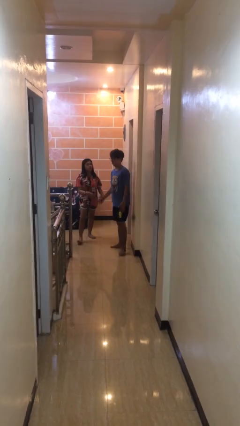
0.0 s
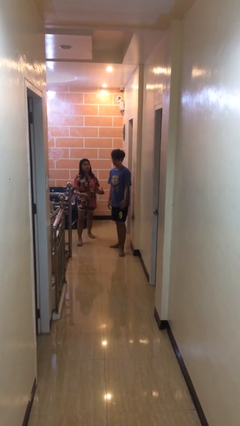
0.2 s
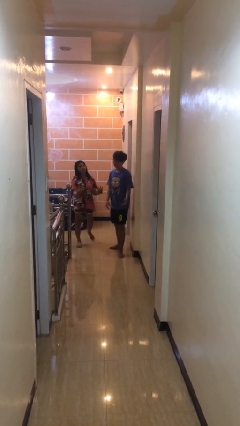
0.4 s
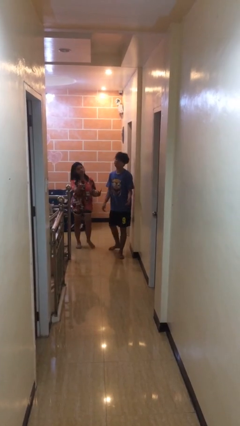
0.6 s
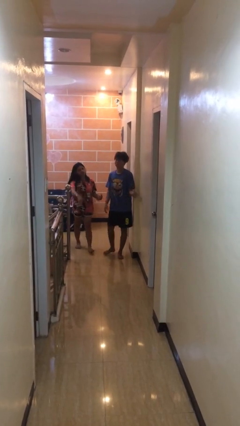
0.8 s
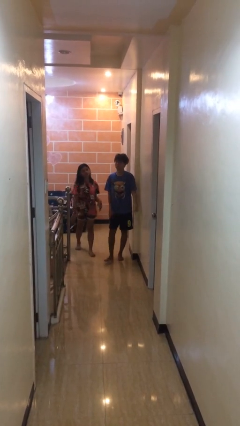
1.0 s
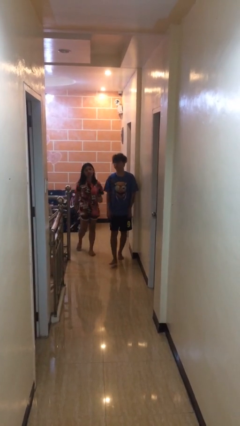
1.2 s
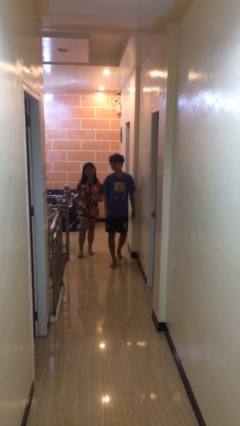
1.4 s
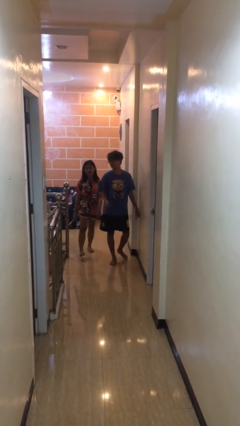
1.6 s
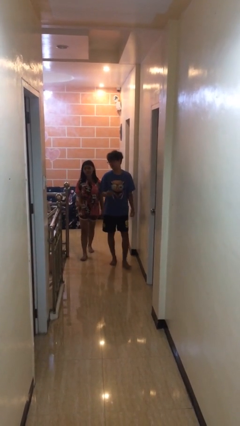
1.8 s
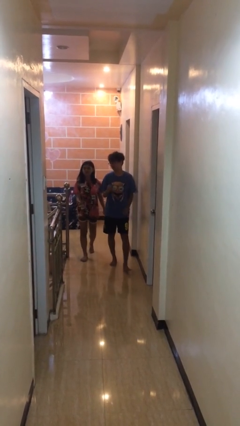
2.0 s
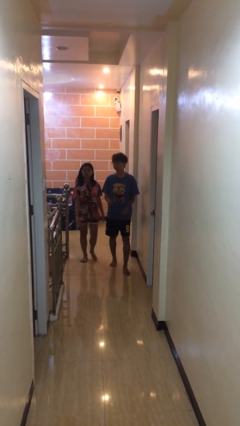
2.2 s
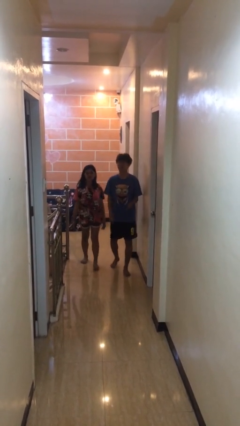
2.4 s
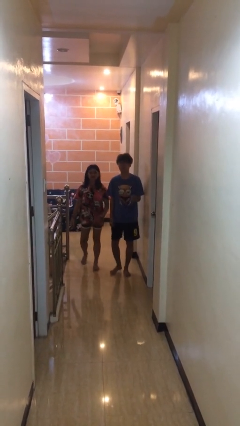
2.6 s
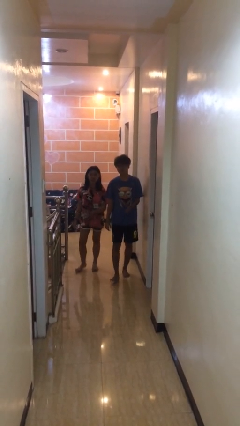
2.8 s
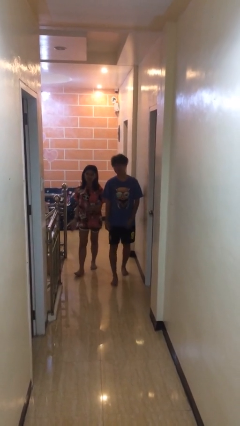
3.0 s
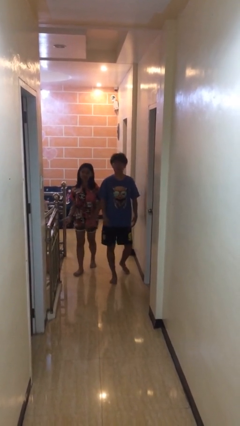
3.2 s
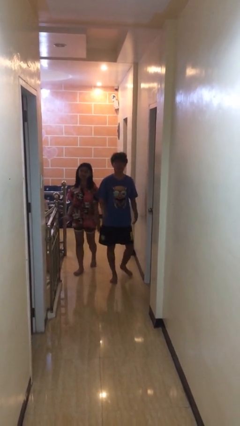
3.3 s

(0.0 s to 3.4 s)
person talks to person

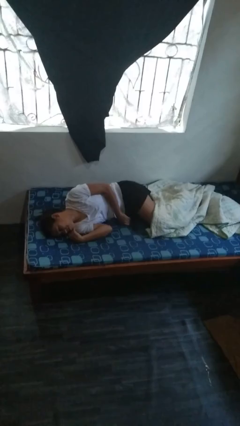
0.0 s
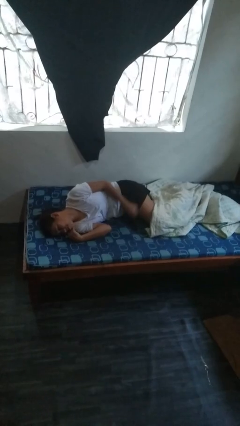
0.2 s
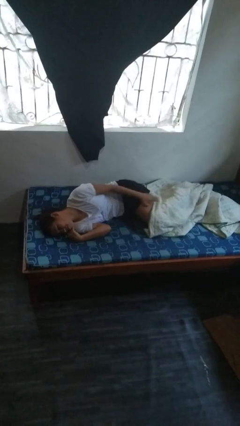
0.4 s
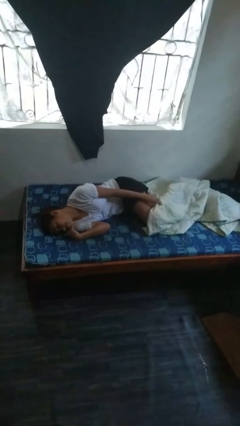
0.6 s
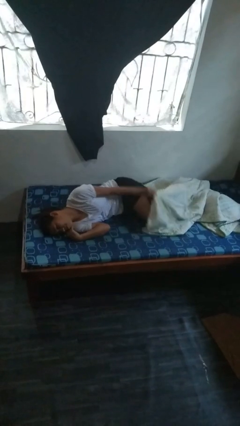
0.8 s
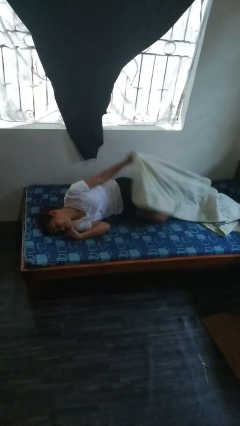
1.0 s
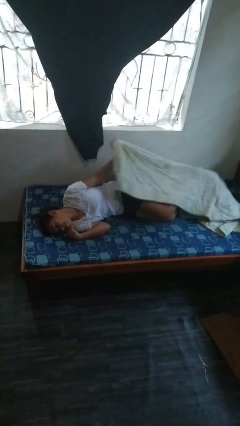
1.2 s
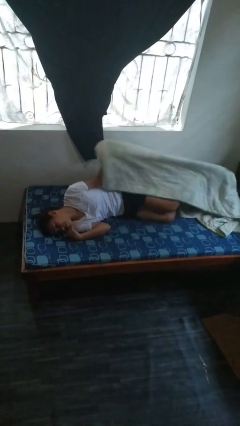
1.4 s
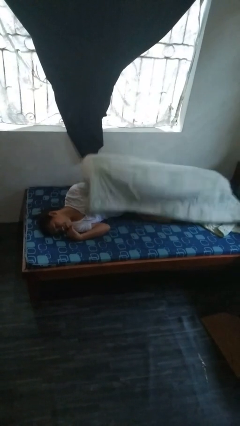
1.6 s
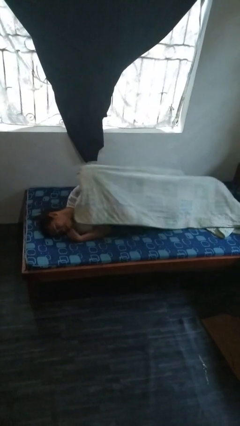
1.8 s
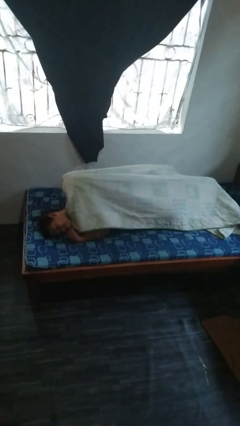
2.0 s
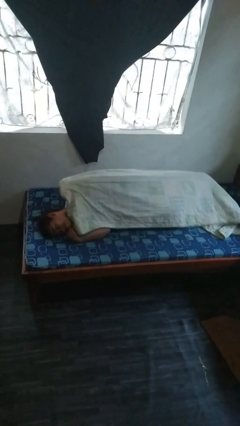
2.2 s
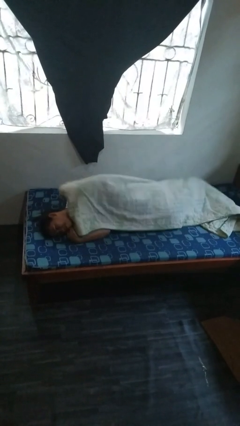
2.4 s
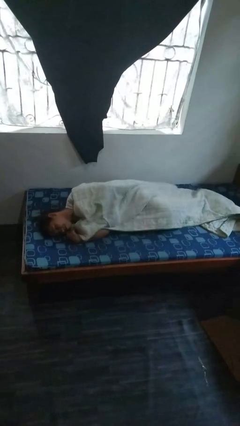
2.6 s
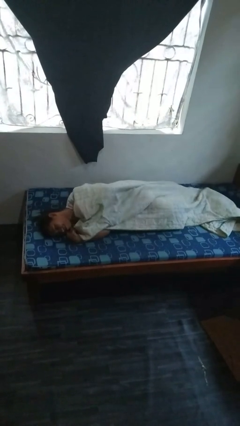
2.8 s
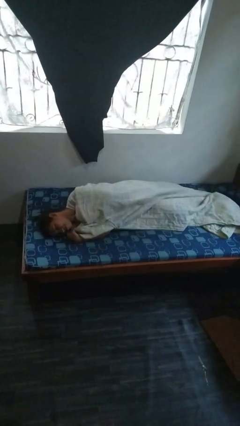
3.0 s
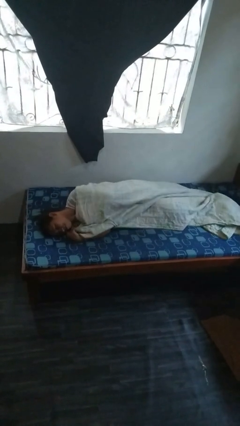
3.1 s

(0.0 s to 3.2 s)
person covers with bedsheets

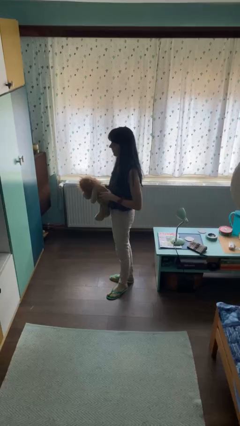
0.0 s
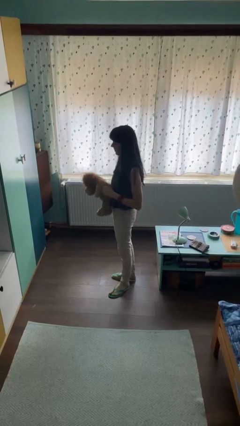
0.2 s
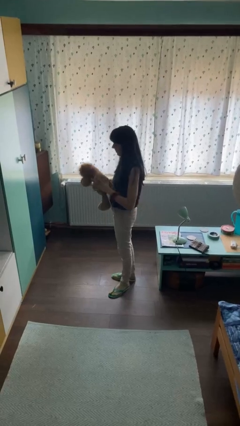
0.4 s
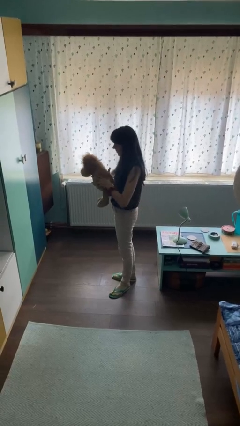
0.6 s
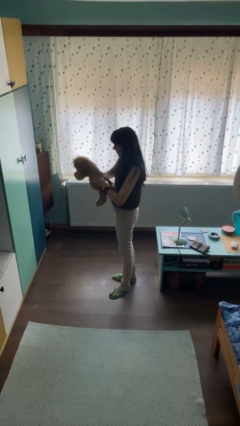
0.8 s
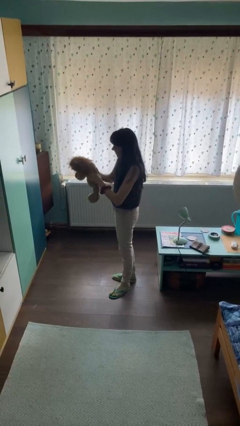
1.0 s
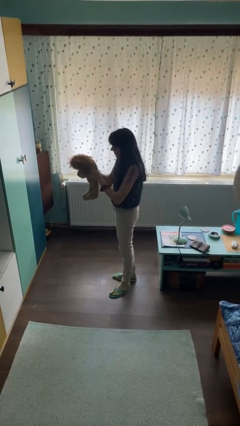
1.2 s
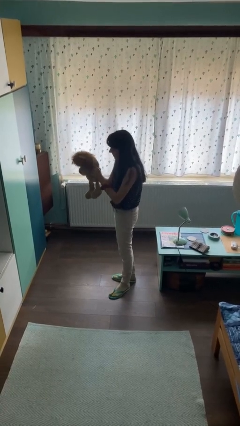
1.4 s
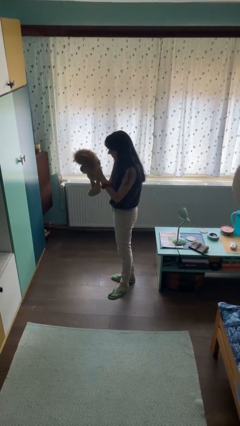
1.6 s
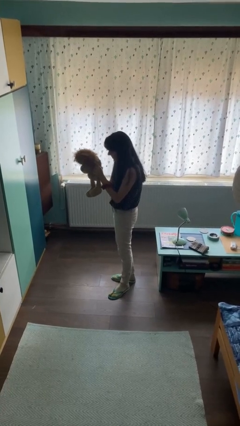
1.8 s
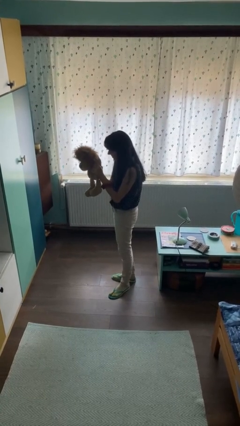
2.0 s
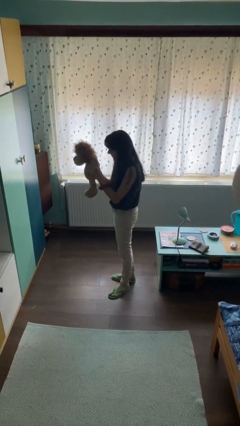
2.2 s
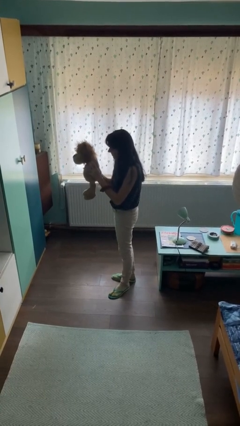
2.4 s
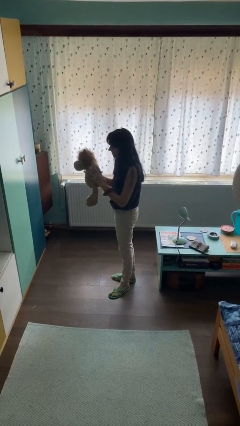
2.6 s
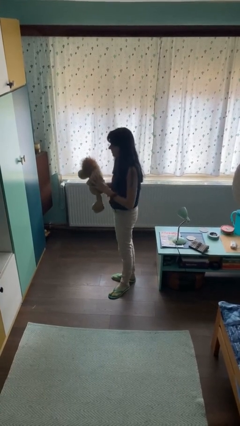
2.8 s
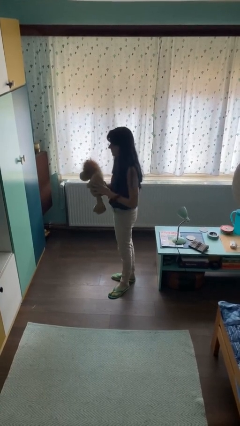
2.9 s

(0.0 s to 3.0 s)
person squeezes object

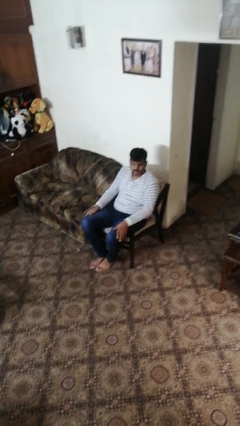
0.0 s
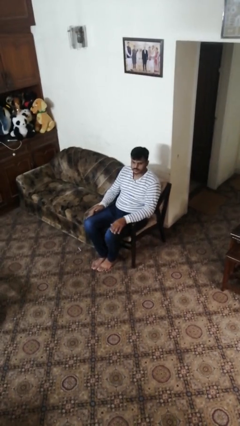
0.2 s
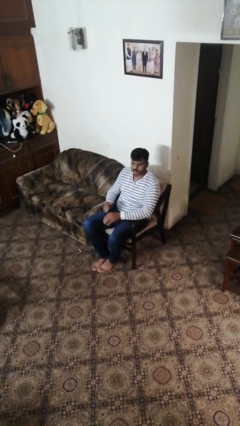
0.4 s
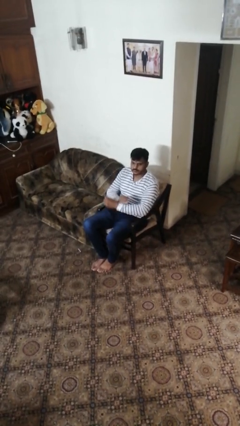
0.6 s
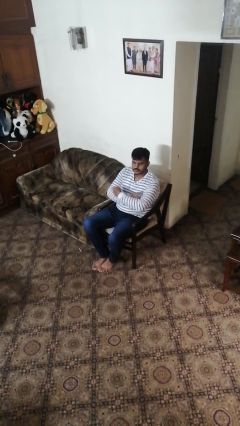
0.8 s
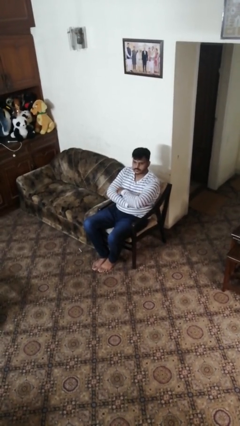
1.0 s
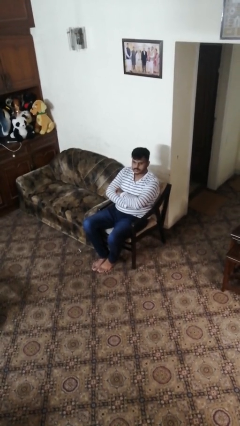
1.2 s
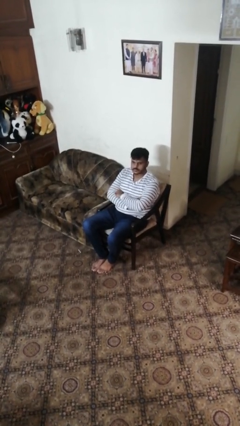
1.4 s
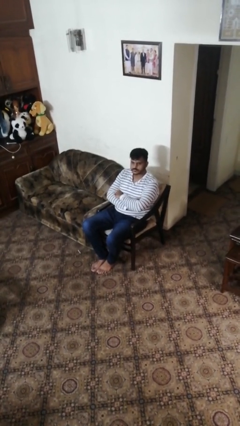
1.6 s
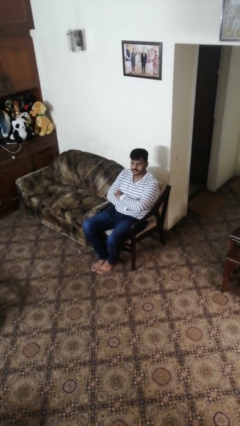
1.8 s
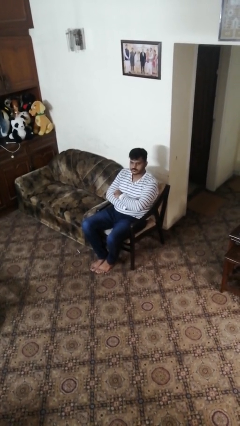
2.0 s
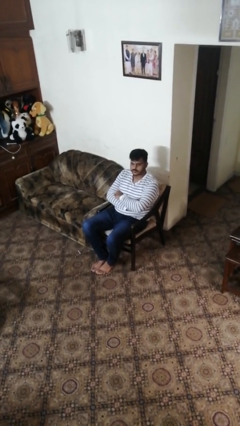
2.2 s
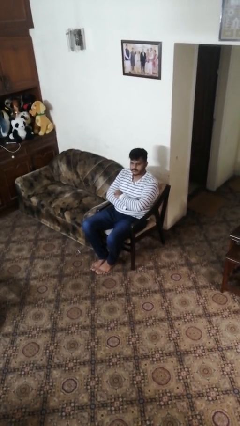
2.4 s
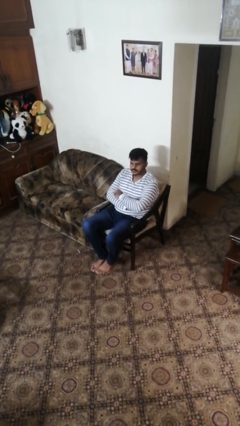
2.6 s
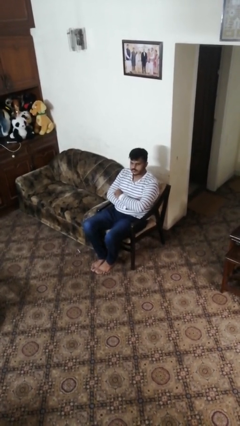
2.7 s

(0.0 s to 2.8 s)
person crosses arms

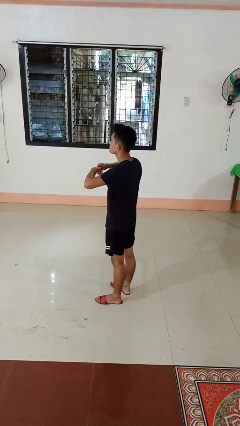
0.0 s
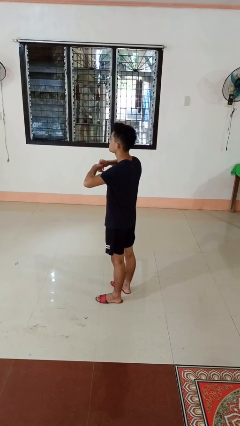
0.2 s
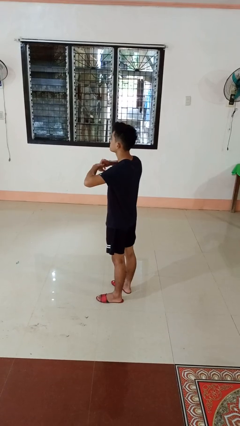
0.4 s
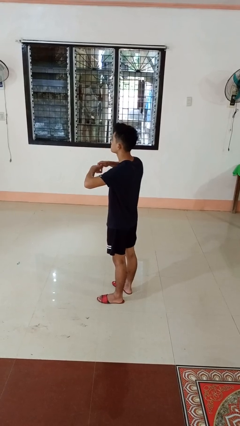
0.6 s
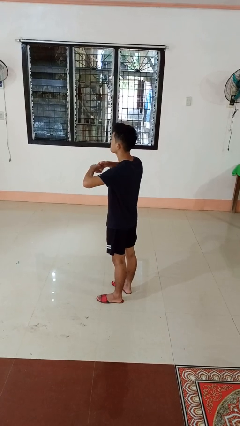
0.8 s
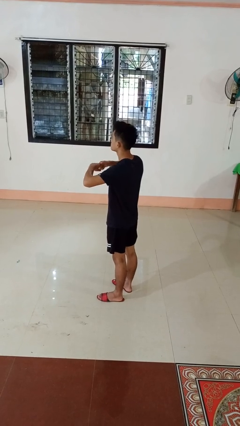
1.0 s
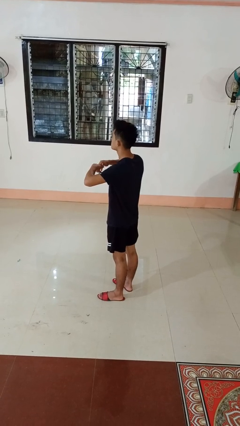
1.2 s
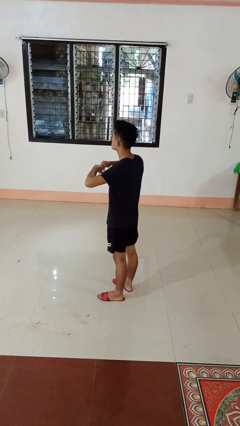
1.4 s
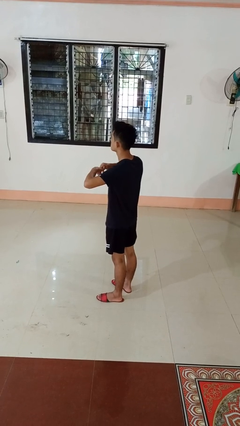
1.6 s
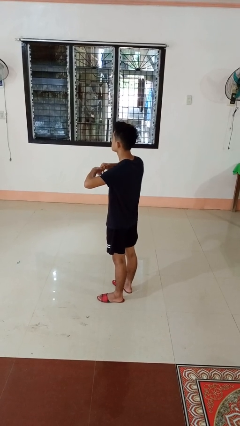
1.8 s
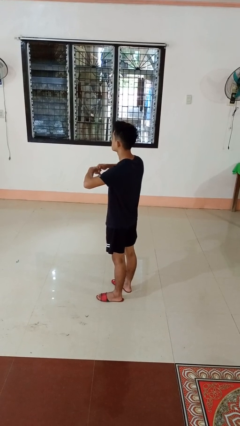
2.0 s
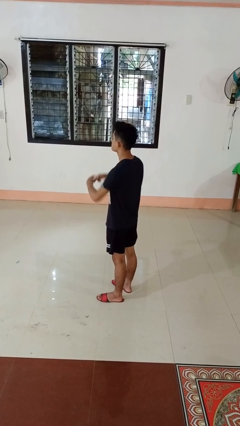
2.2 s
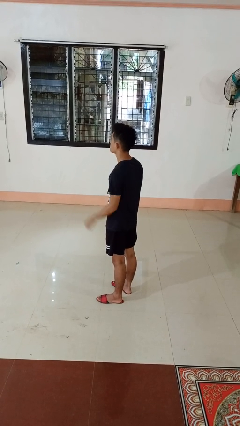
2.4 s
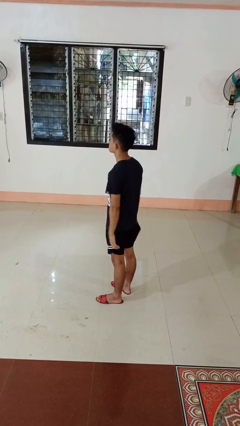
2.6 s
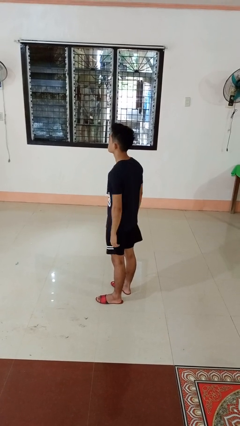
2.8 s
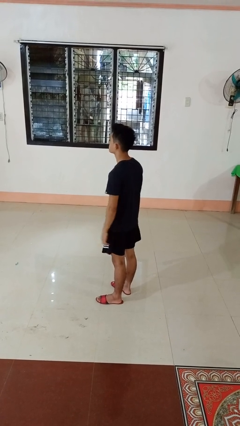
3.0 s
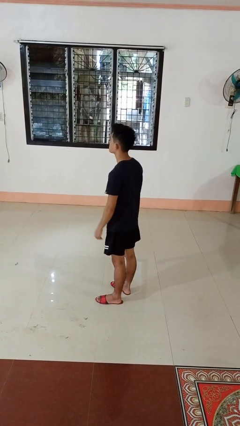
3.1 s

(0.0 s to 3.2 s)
person cracks knuckles

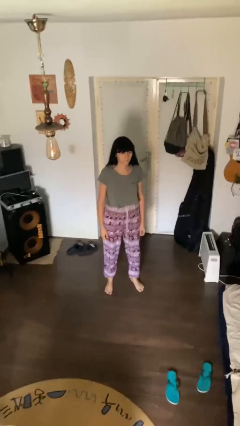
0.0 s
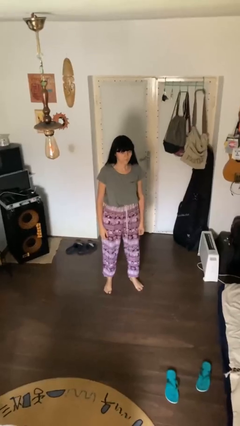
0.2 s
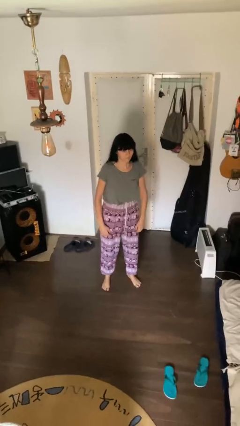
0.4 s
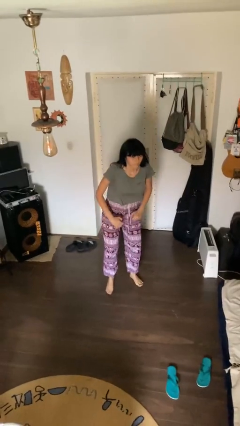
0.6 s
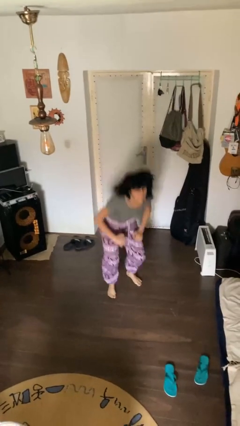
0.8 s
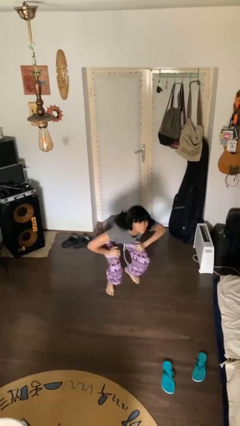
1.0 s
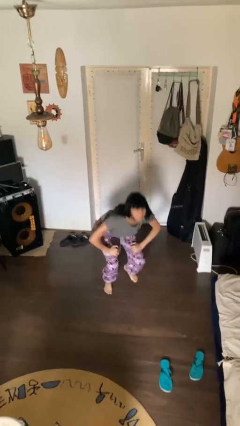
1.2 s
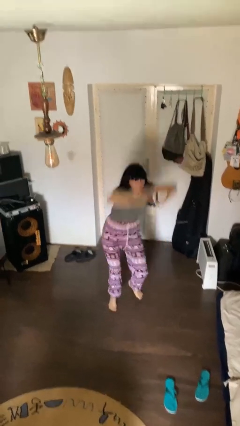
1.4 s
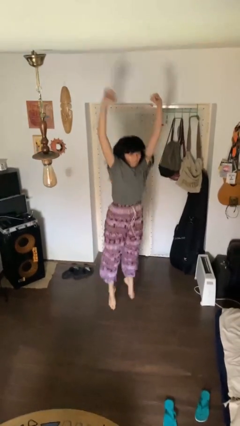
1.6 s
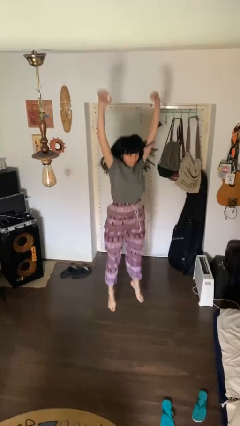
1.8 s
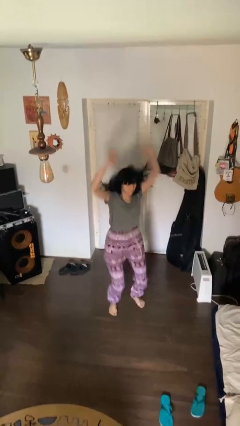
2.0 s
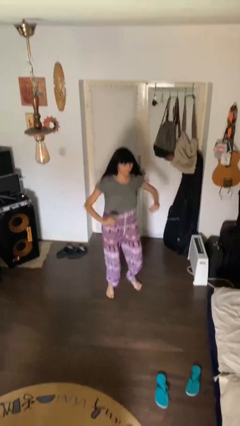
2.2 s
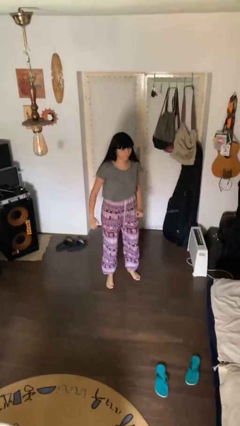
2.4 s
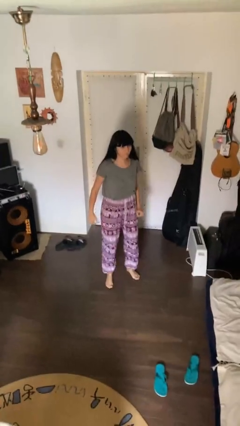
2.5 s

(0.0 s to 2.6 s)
person jumps
